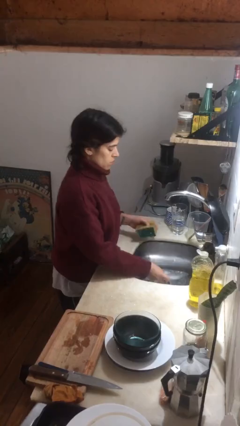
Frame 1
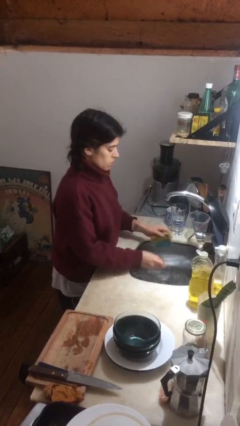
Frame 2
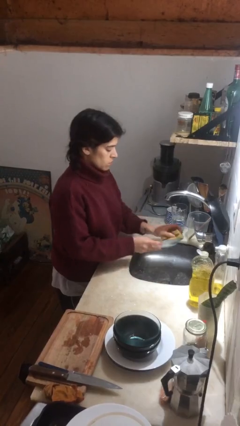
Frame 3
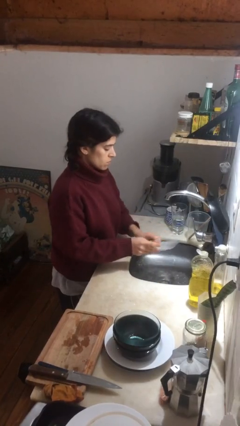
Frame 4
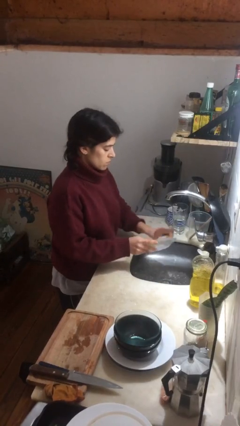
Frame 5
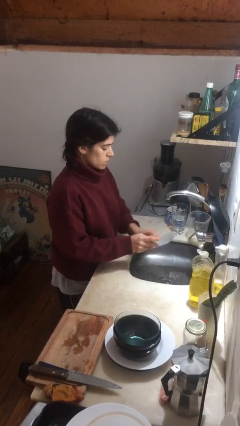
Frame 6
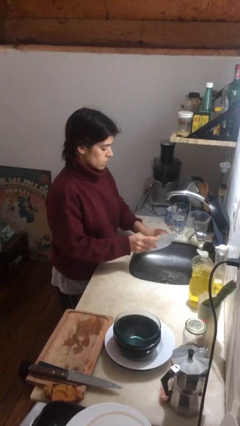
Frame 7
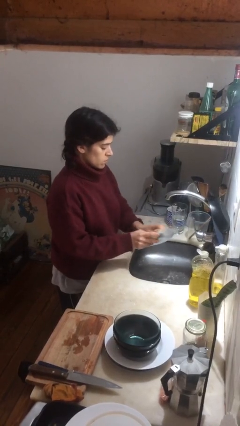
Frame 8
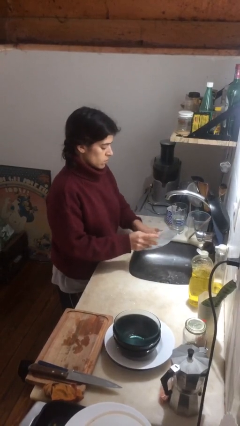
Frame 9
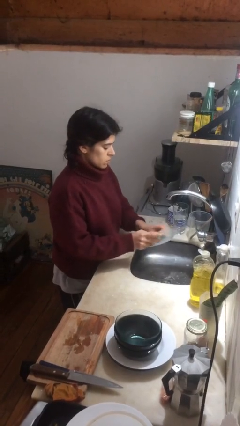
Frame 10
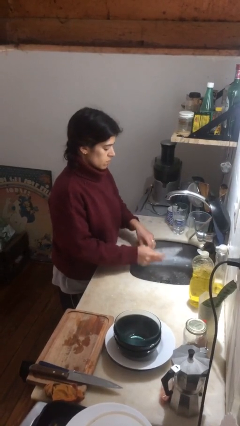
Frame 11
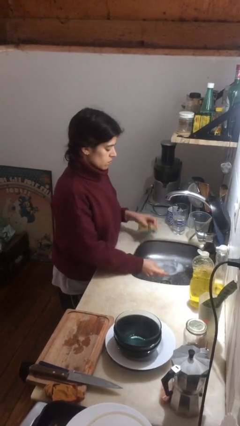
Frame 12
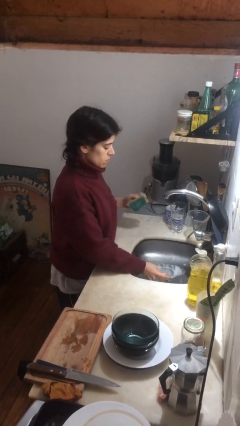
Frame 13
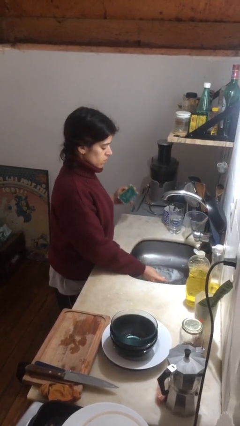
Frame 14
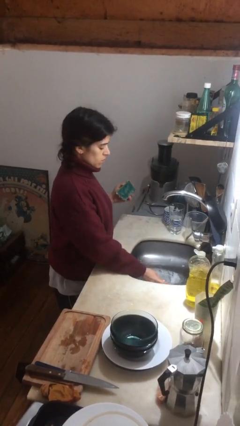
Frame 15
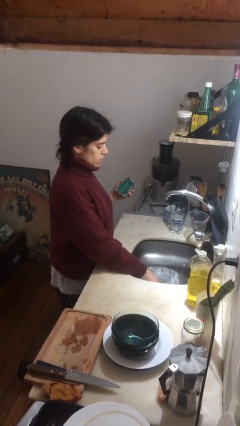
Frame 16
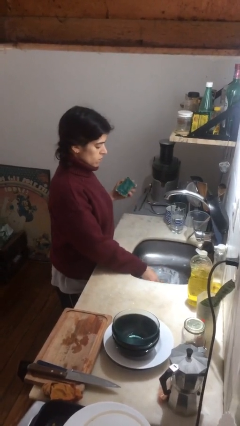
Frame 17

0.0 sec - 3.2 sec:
person washes dish

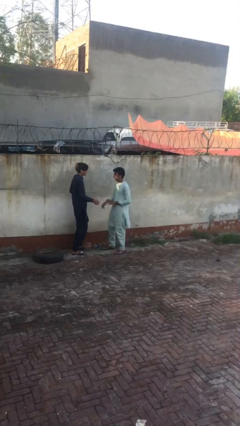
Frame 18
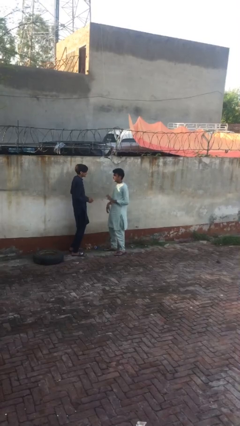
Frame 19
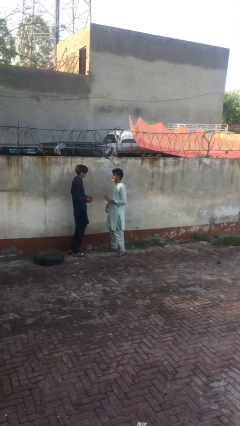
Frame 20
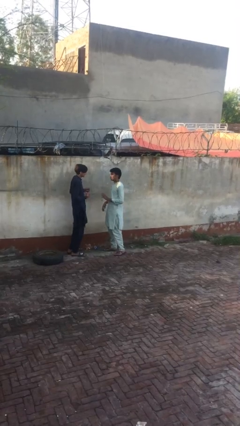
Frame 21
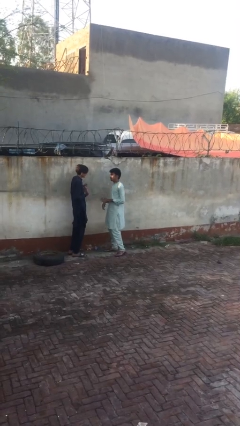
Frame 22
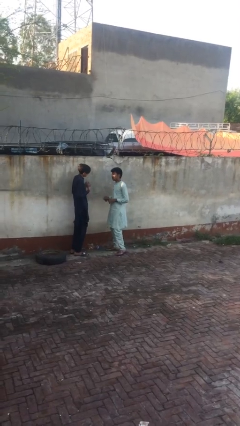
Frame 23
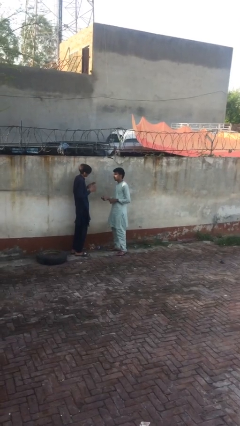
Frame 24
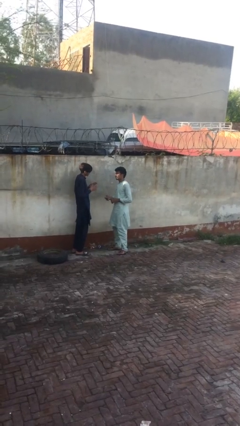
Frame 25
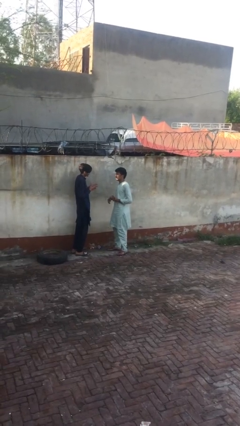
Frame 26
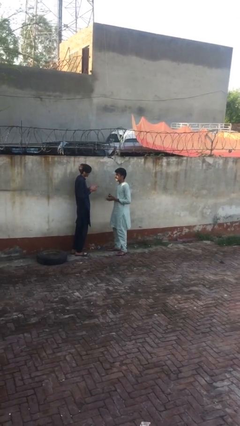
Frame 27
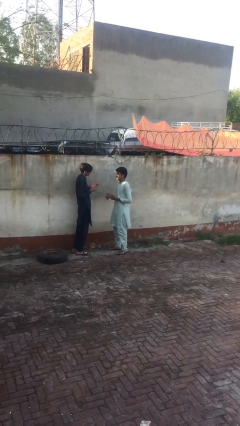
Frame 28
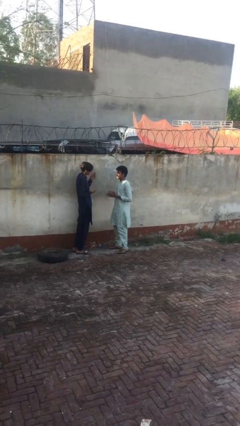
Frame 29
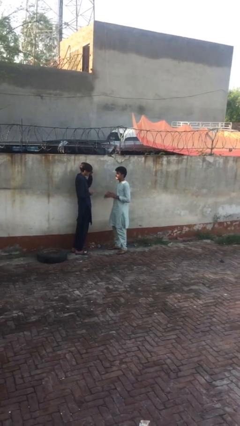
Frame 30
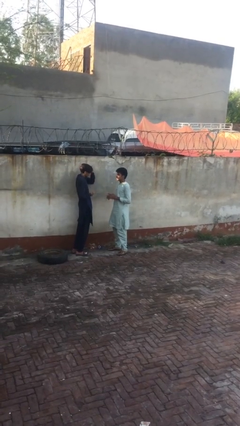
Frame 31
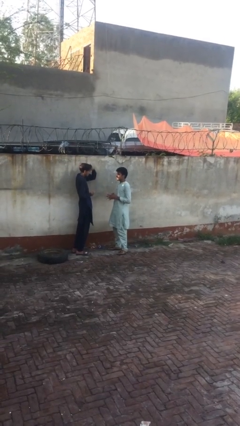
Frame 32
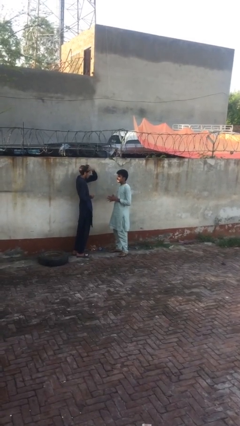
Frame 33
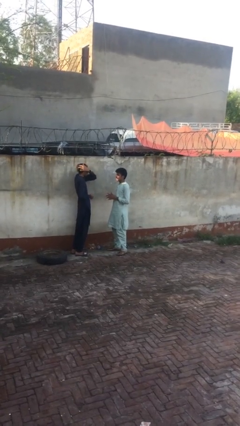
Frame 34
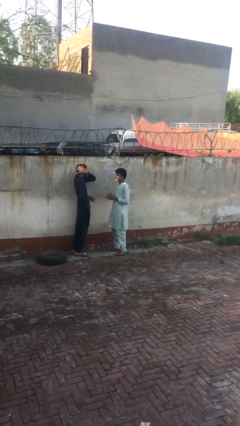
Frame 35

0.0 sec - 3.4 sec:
person talks to person

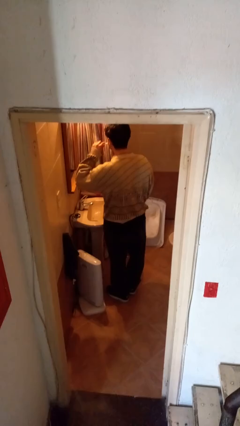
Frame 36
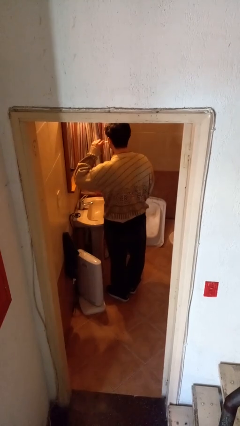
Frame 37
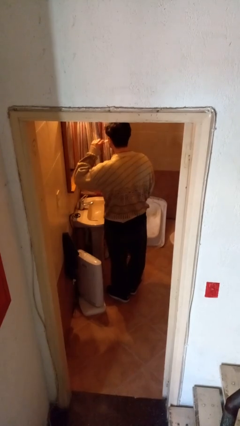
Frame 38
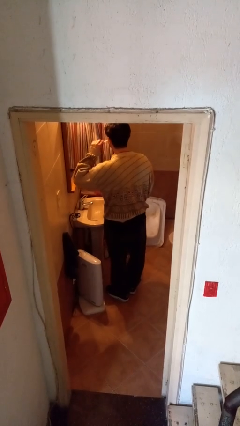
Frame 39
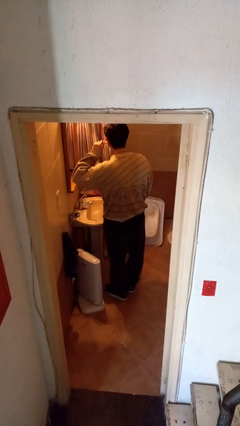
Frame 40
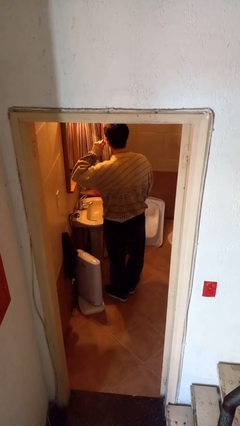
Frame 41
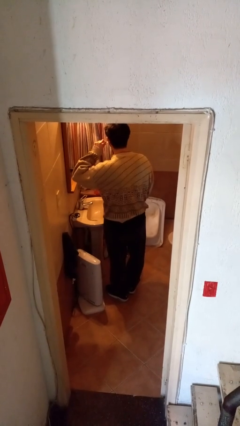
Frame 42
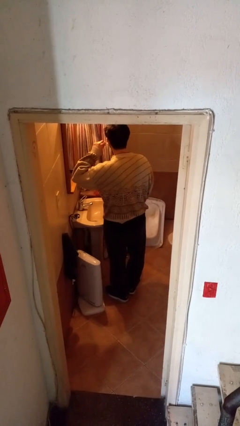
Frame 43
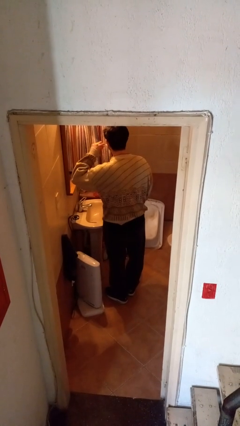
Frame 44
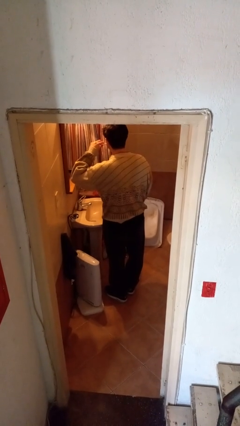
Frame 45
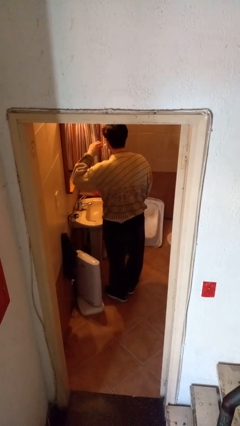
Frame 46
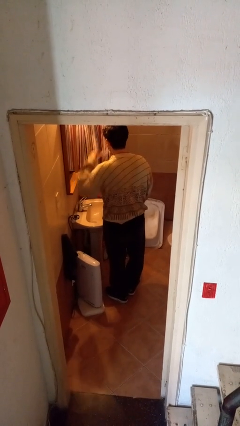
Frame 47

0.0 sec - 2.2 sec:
person brushes teeth

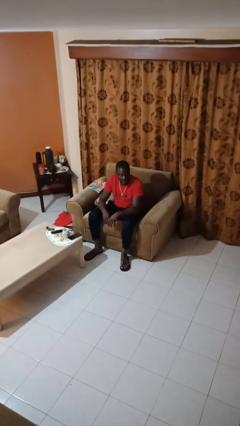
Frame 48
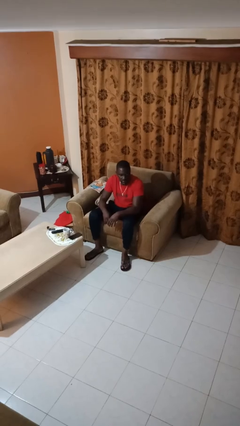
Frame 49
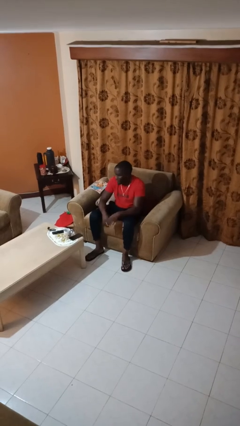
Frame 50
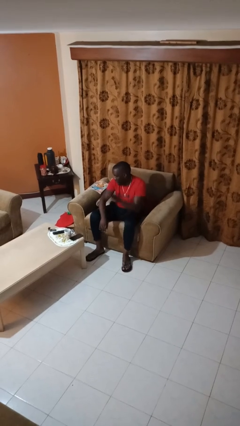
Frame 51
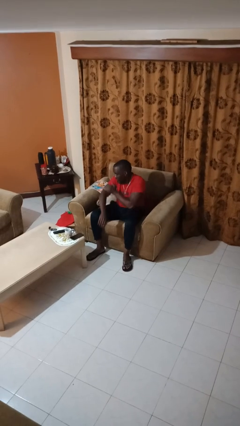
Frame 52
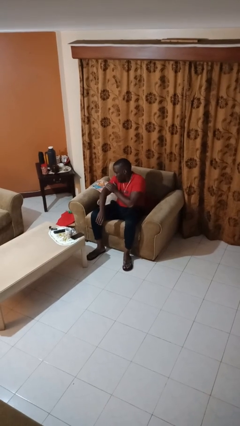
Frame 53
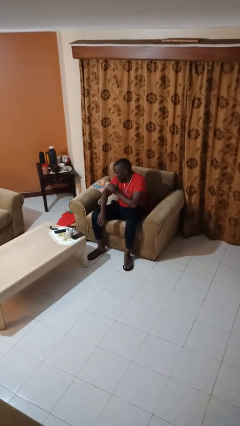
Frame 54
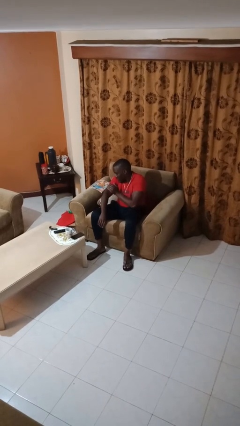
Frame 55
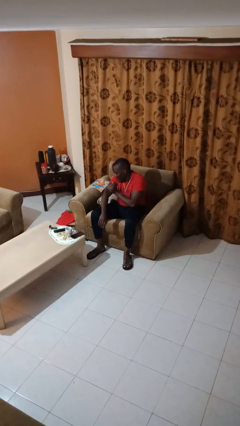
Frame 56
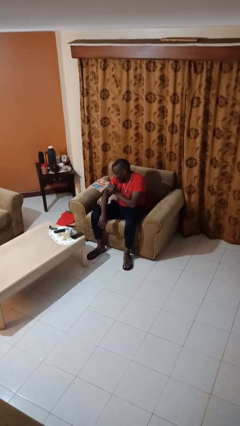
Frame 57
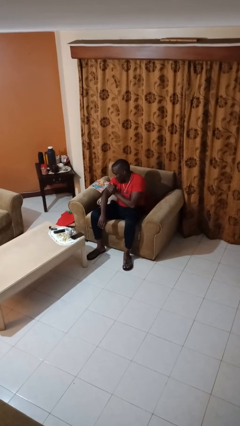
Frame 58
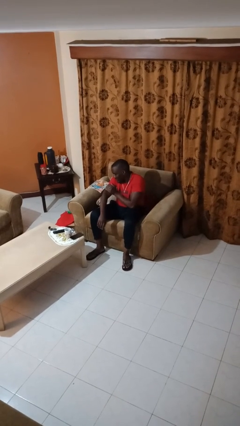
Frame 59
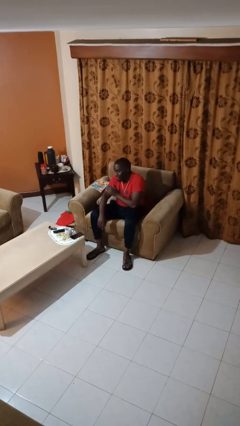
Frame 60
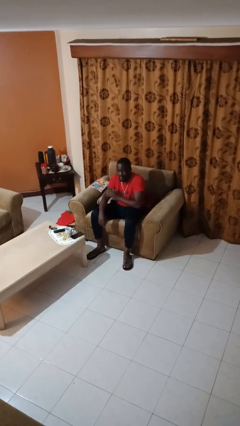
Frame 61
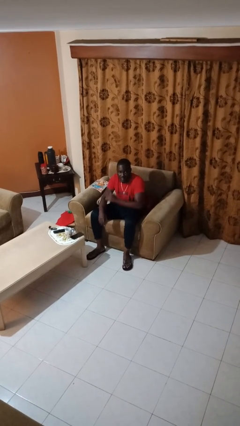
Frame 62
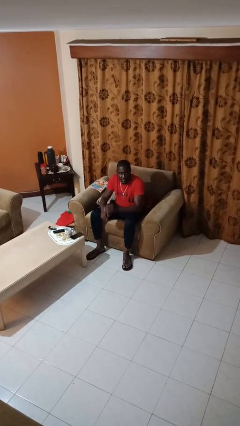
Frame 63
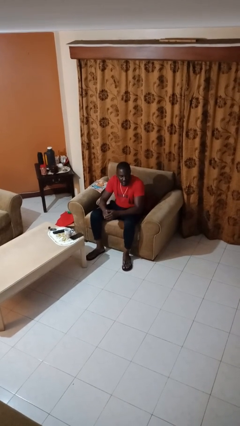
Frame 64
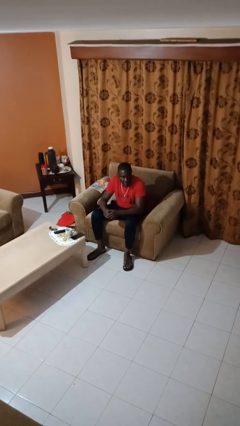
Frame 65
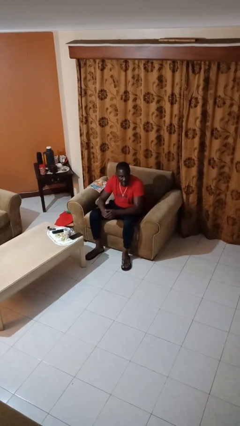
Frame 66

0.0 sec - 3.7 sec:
person swats bug

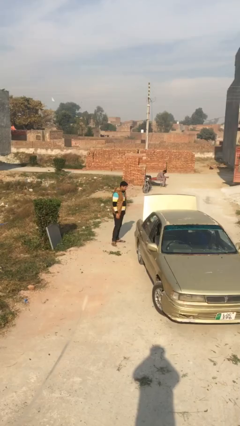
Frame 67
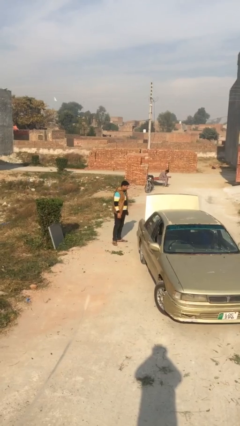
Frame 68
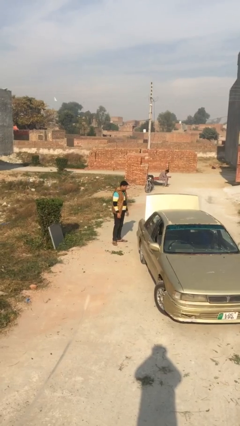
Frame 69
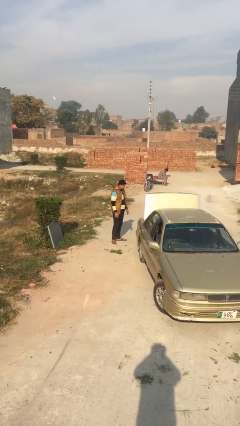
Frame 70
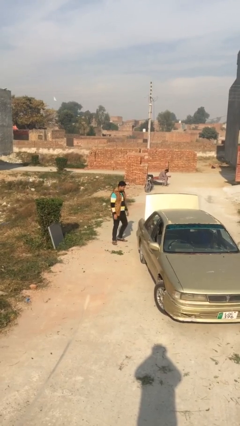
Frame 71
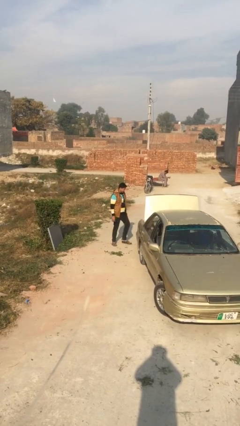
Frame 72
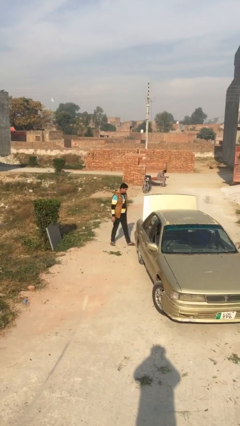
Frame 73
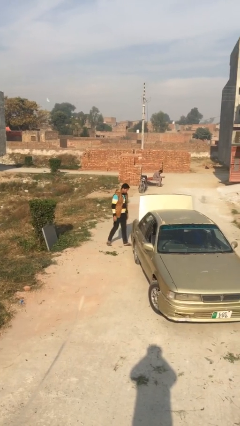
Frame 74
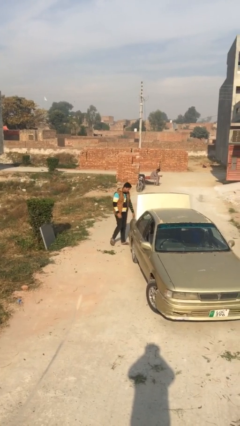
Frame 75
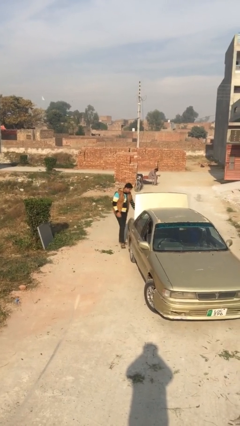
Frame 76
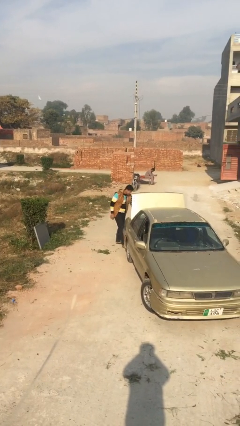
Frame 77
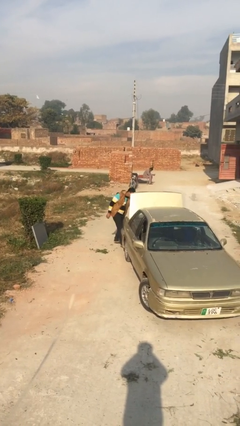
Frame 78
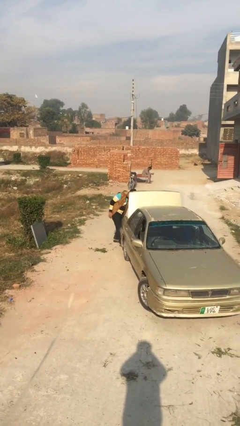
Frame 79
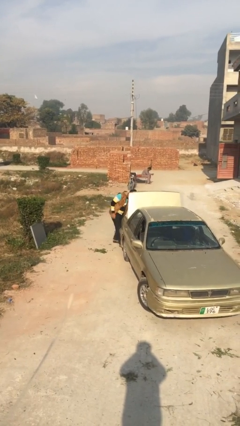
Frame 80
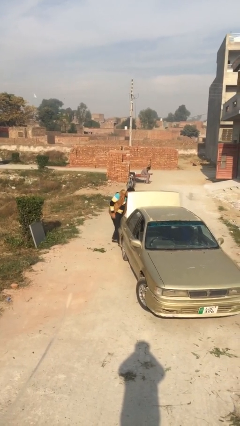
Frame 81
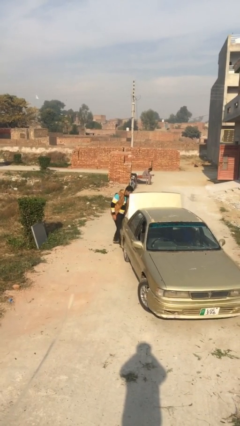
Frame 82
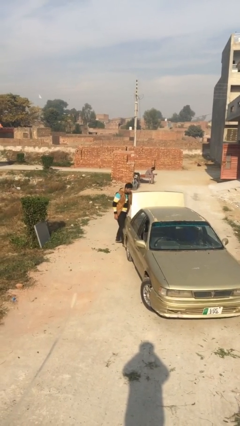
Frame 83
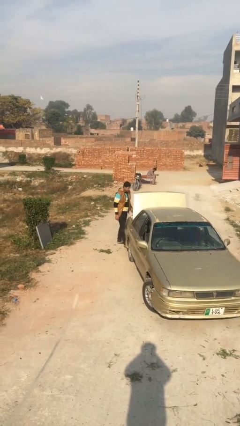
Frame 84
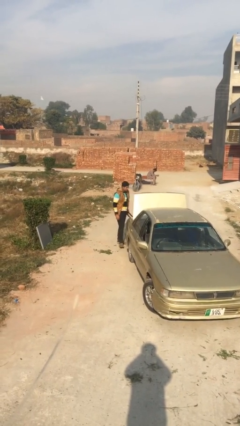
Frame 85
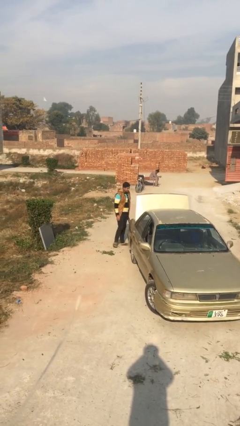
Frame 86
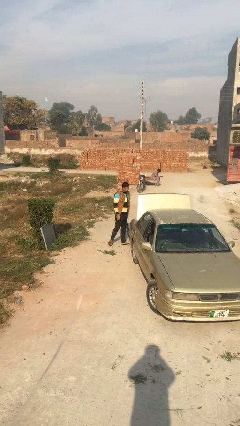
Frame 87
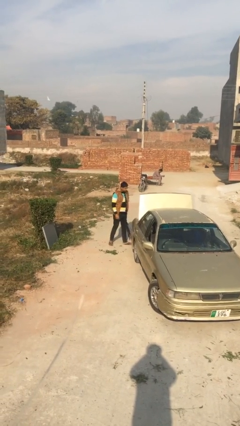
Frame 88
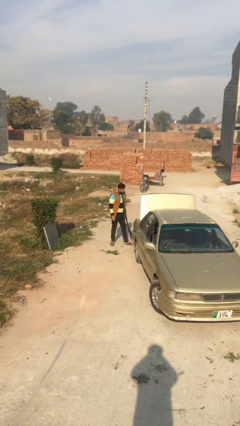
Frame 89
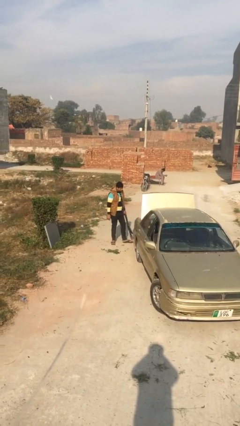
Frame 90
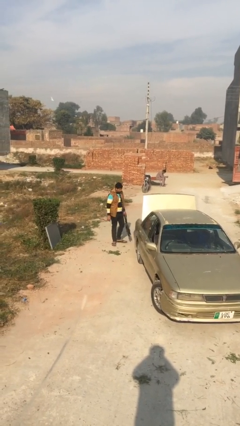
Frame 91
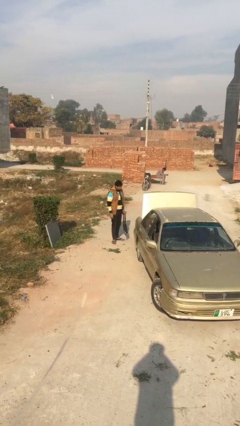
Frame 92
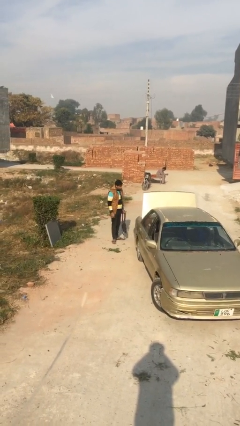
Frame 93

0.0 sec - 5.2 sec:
person unloads car
